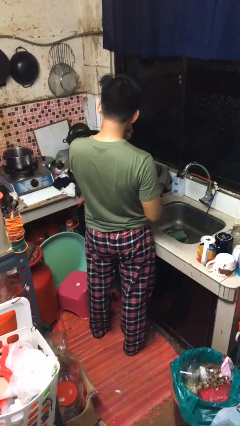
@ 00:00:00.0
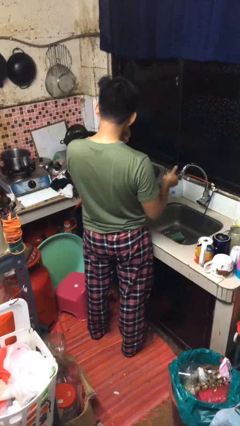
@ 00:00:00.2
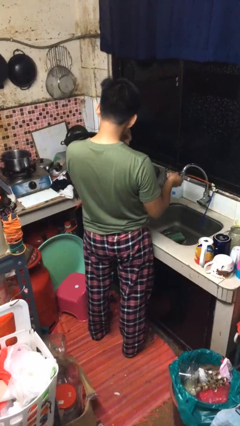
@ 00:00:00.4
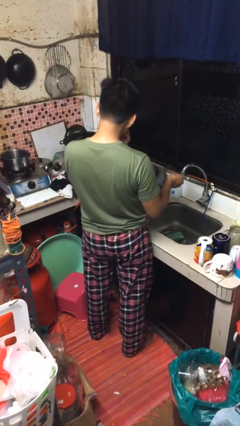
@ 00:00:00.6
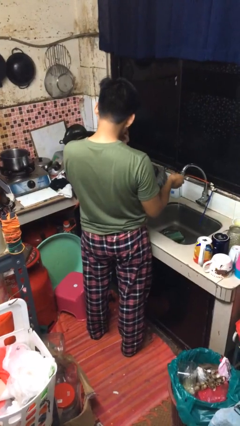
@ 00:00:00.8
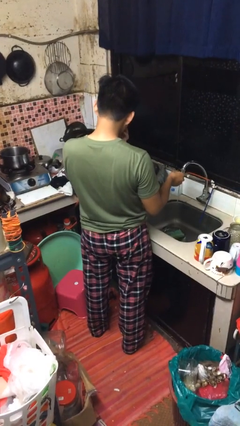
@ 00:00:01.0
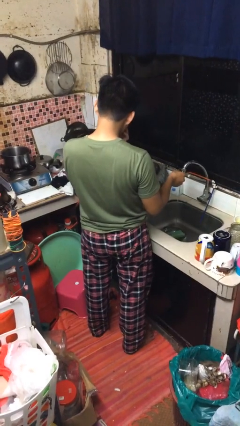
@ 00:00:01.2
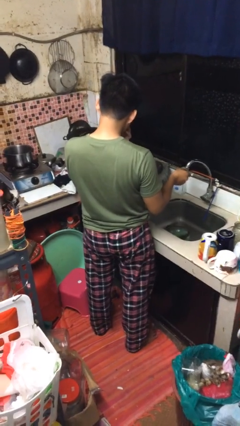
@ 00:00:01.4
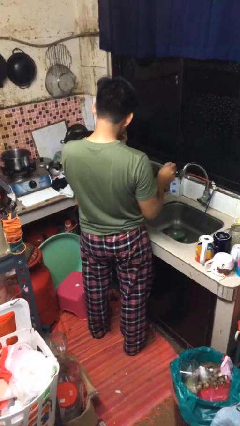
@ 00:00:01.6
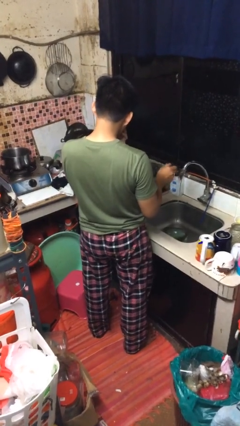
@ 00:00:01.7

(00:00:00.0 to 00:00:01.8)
person turns on faucet

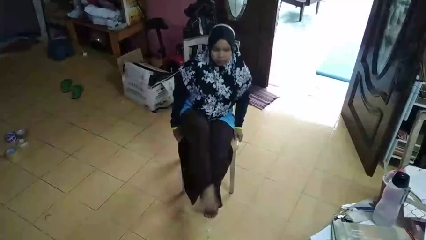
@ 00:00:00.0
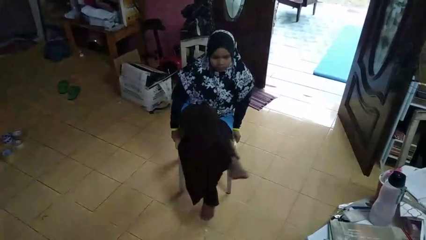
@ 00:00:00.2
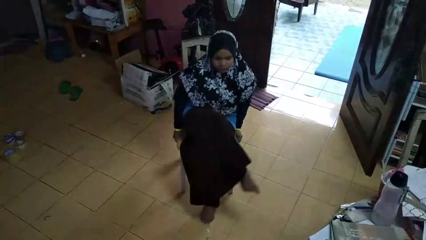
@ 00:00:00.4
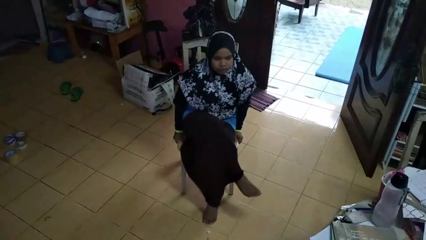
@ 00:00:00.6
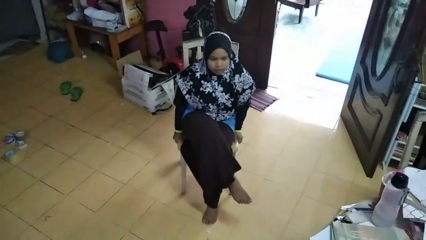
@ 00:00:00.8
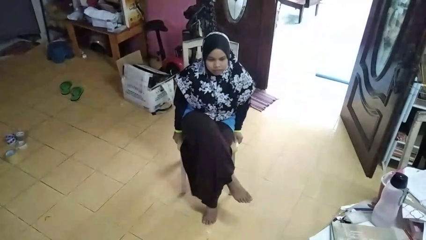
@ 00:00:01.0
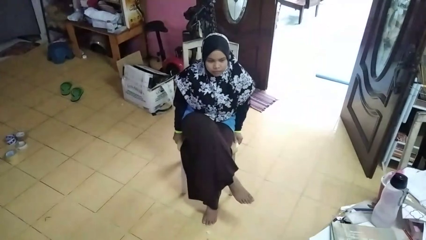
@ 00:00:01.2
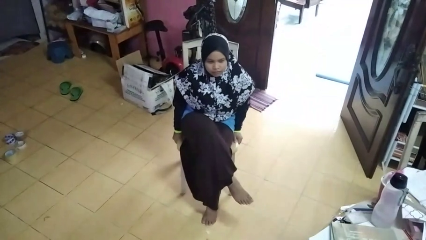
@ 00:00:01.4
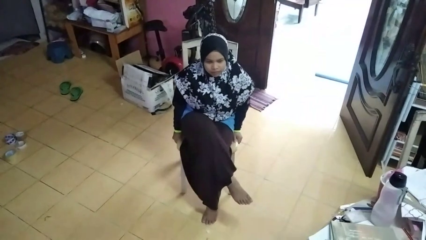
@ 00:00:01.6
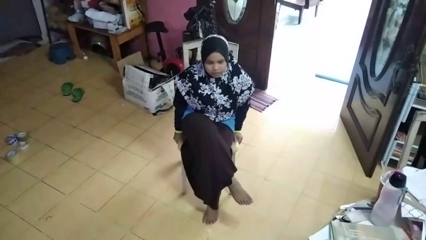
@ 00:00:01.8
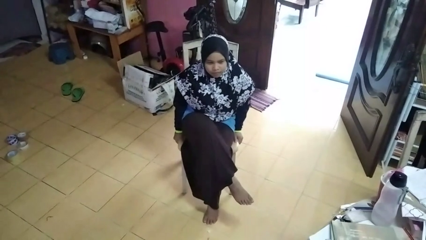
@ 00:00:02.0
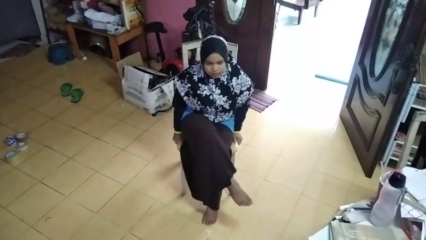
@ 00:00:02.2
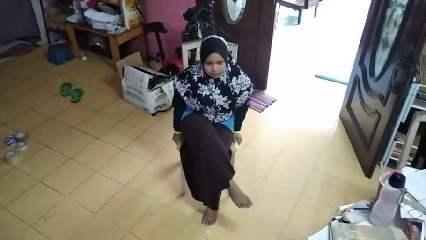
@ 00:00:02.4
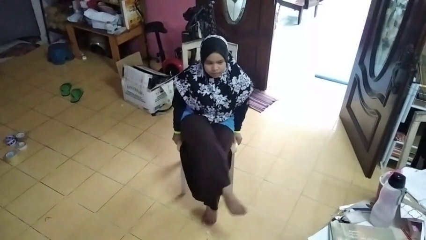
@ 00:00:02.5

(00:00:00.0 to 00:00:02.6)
person crosses legs

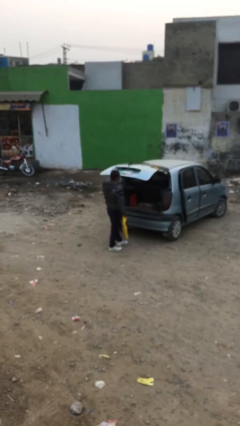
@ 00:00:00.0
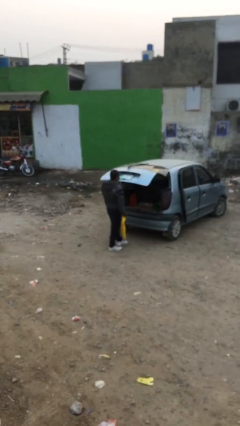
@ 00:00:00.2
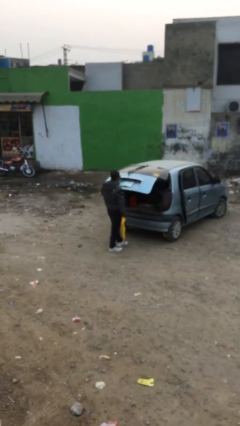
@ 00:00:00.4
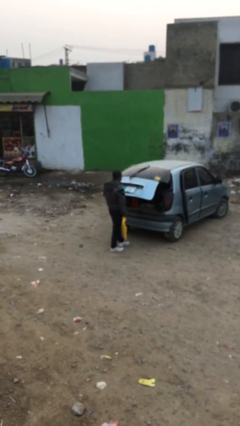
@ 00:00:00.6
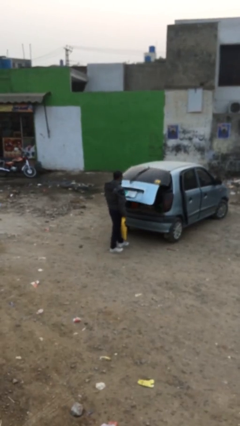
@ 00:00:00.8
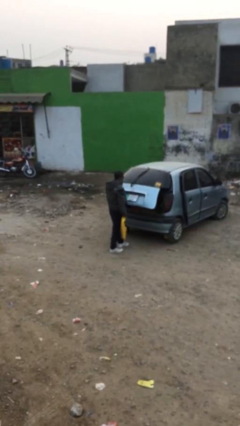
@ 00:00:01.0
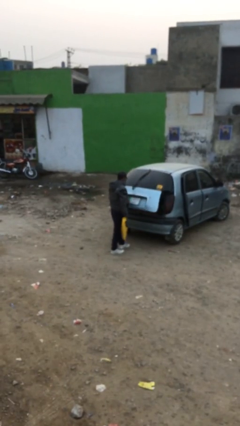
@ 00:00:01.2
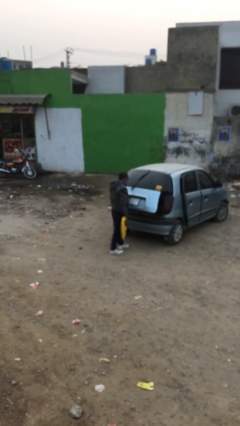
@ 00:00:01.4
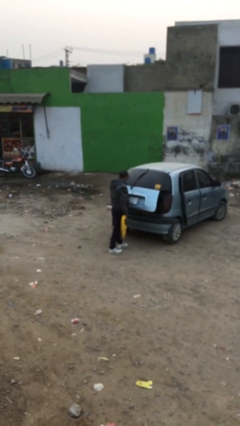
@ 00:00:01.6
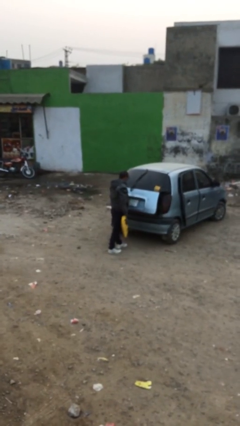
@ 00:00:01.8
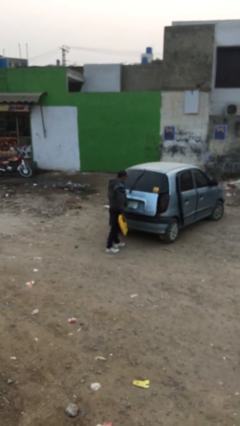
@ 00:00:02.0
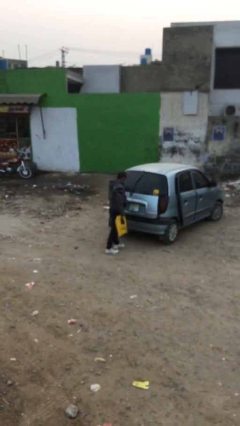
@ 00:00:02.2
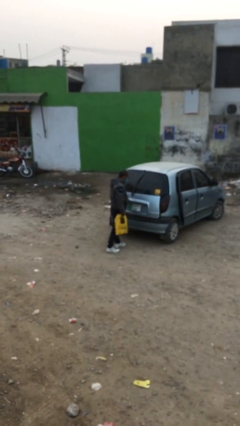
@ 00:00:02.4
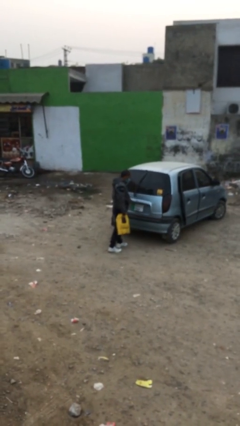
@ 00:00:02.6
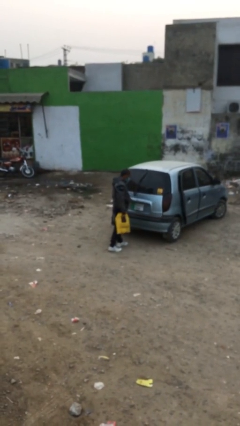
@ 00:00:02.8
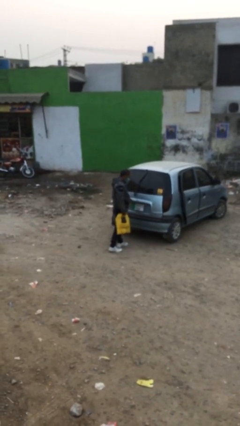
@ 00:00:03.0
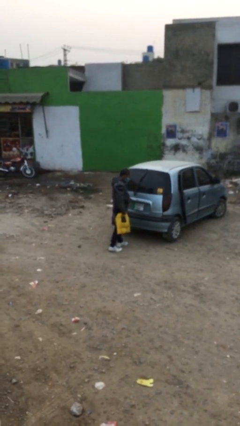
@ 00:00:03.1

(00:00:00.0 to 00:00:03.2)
person closes car trunk

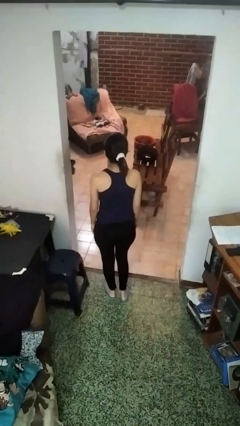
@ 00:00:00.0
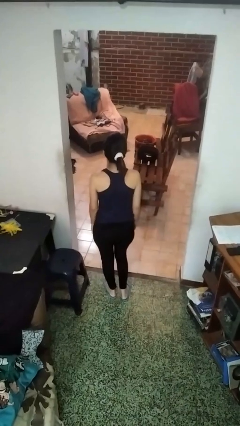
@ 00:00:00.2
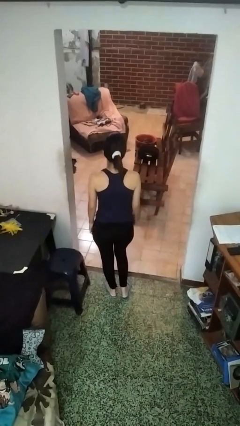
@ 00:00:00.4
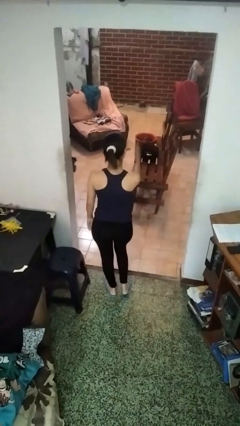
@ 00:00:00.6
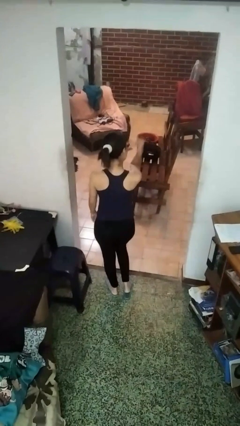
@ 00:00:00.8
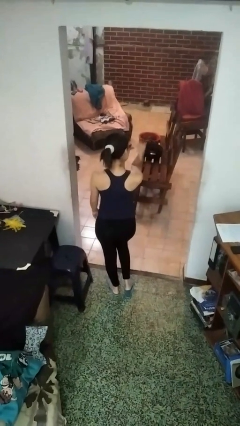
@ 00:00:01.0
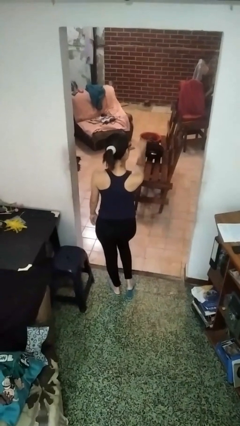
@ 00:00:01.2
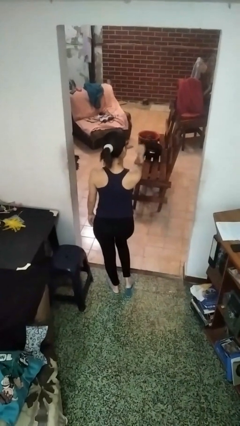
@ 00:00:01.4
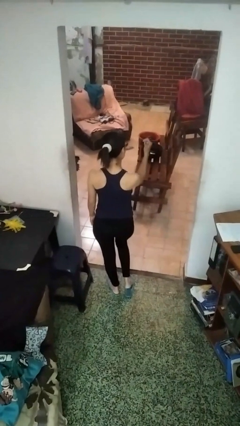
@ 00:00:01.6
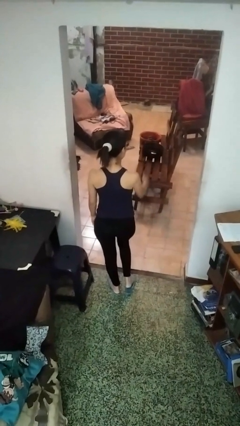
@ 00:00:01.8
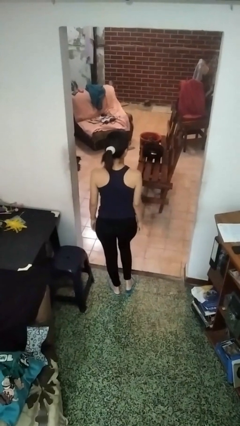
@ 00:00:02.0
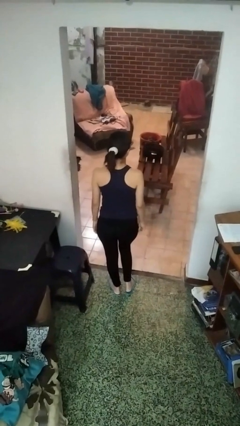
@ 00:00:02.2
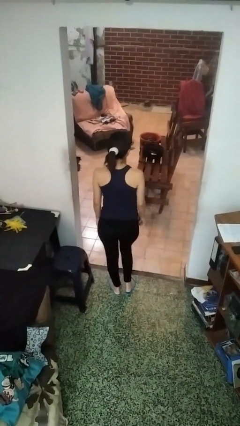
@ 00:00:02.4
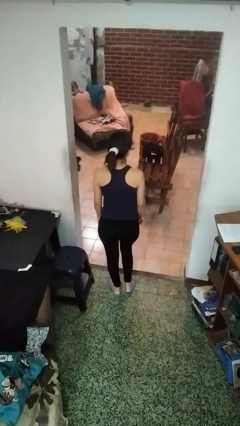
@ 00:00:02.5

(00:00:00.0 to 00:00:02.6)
person gestures behind me

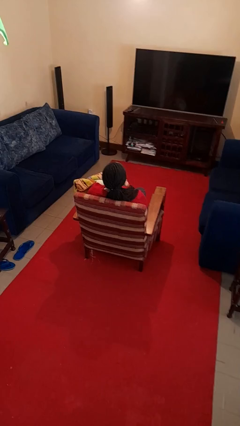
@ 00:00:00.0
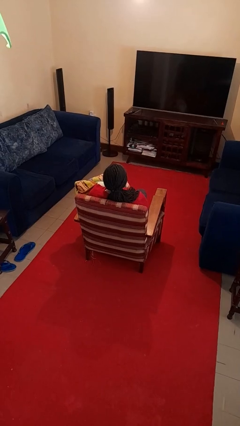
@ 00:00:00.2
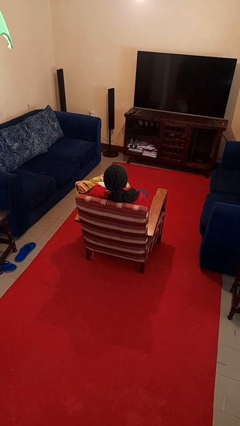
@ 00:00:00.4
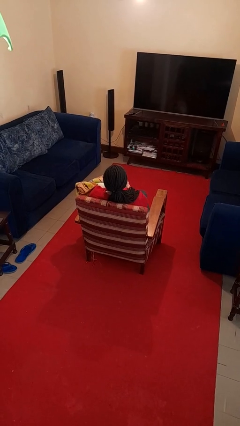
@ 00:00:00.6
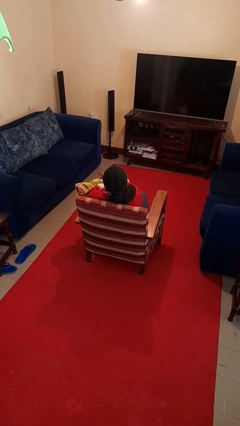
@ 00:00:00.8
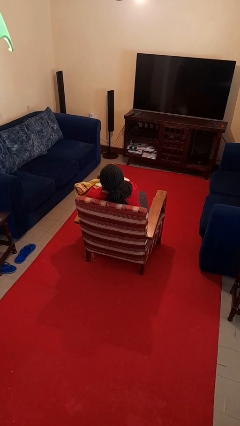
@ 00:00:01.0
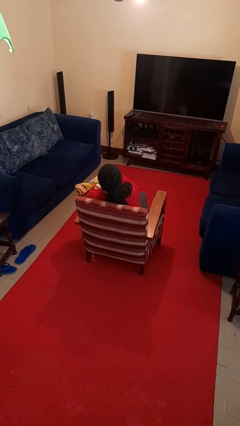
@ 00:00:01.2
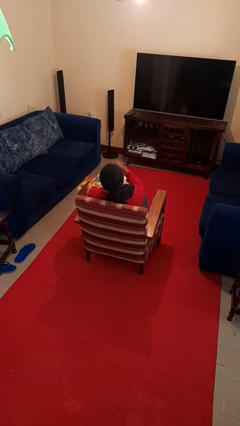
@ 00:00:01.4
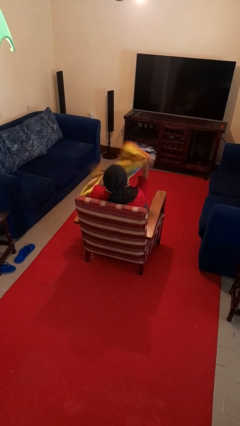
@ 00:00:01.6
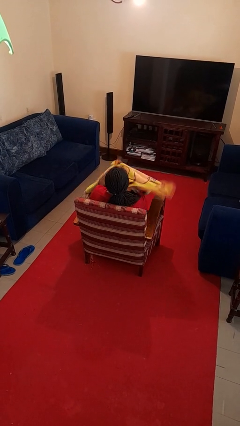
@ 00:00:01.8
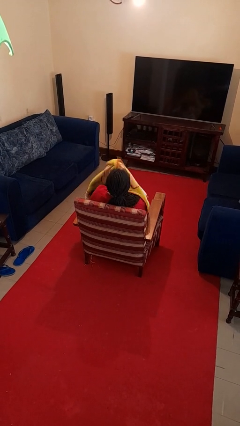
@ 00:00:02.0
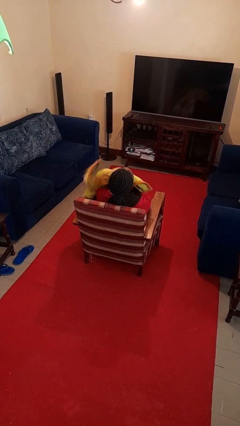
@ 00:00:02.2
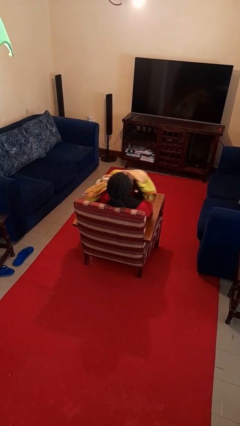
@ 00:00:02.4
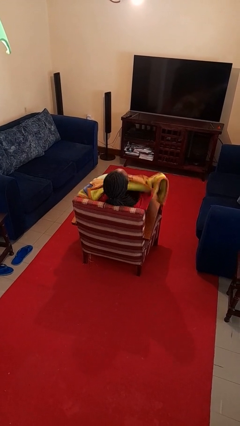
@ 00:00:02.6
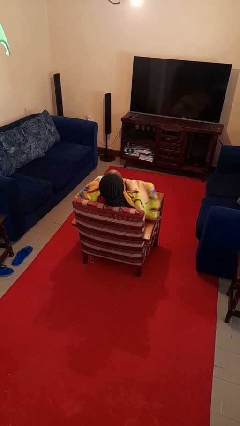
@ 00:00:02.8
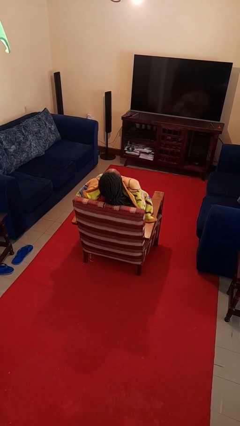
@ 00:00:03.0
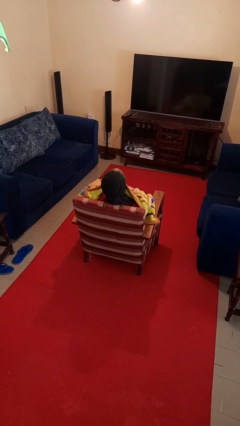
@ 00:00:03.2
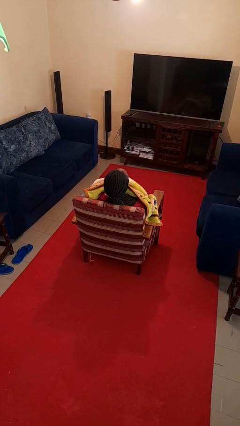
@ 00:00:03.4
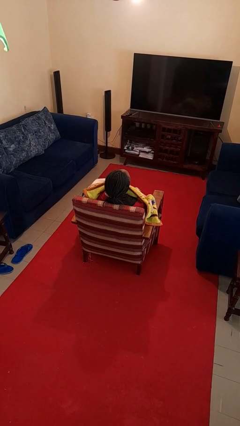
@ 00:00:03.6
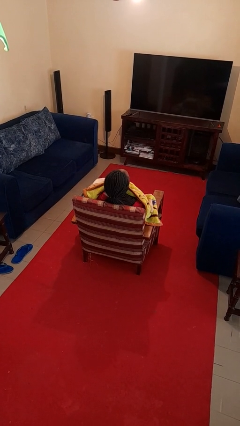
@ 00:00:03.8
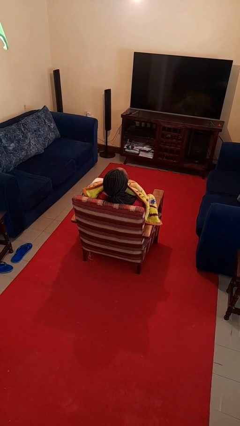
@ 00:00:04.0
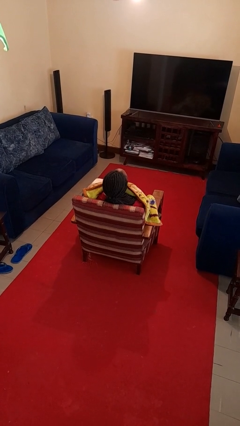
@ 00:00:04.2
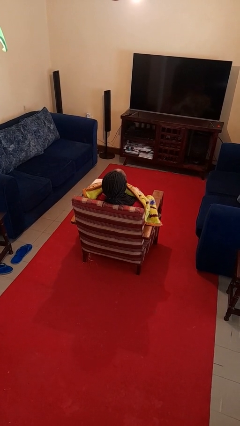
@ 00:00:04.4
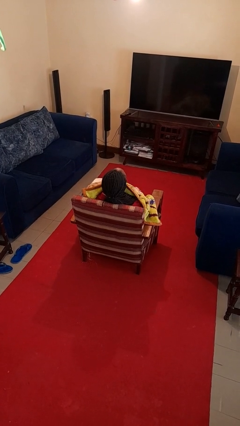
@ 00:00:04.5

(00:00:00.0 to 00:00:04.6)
person covers with blanket

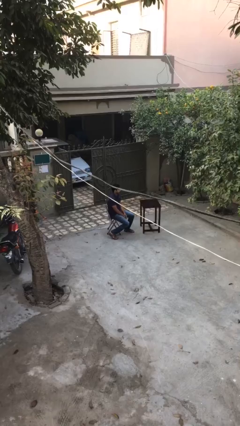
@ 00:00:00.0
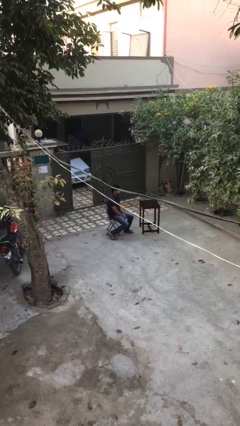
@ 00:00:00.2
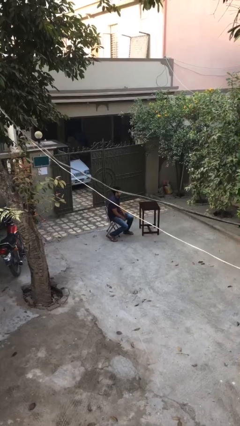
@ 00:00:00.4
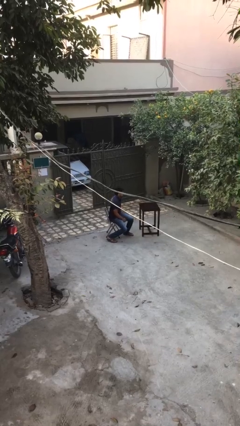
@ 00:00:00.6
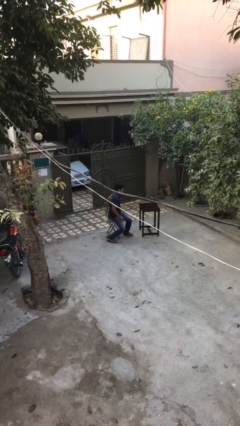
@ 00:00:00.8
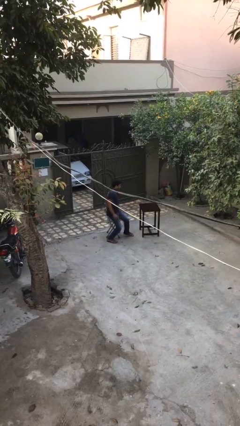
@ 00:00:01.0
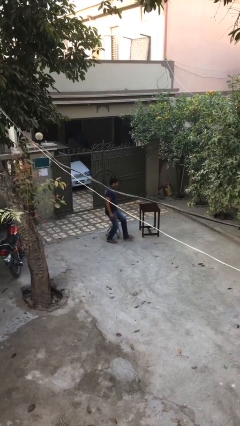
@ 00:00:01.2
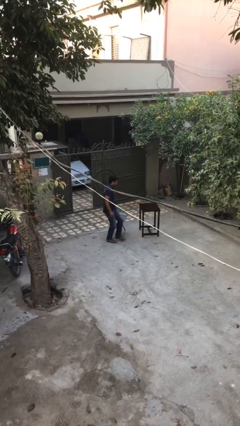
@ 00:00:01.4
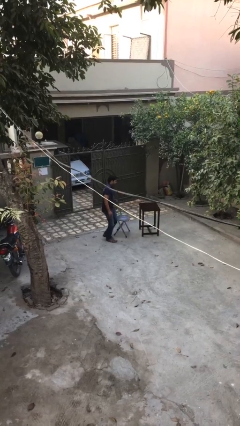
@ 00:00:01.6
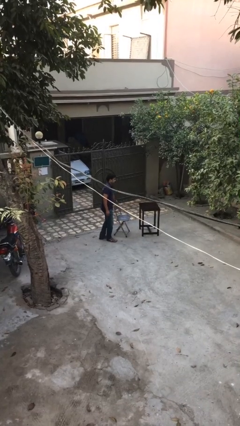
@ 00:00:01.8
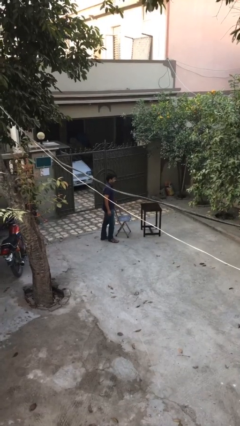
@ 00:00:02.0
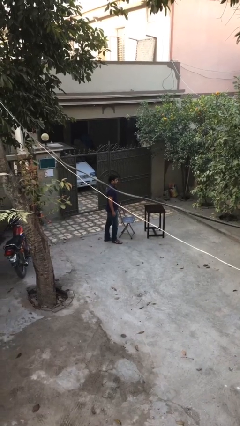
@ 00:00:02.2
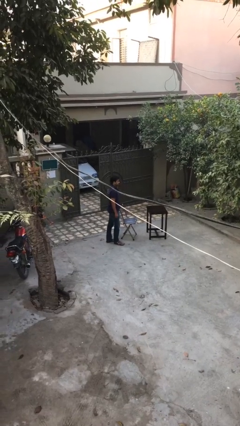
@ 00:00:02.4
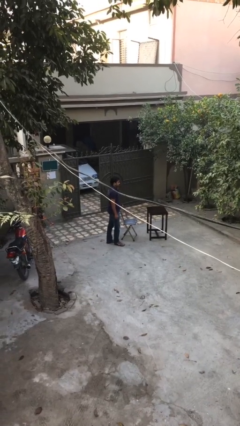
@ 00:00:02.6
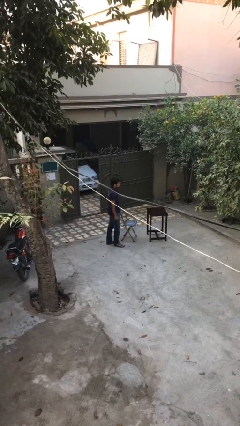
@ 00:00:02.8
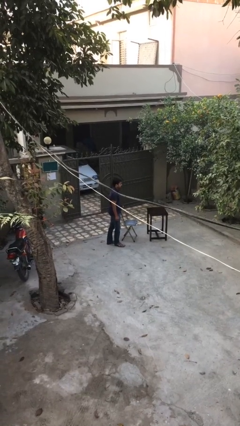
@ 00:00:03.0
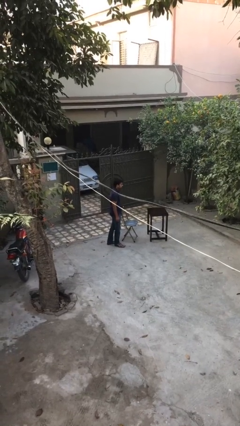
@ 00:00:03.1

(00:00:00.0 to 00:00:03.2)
person stands up
